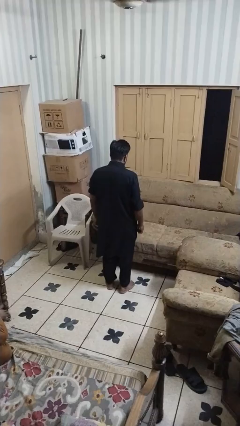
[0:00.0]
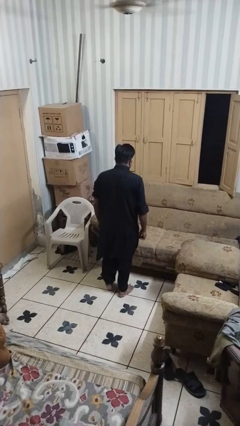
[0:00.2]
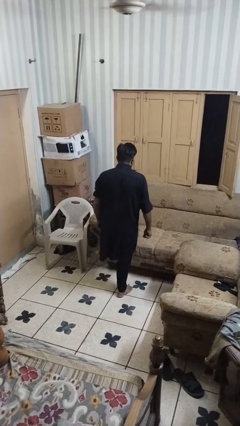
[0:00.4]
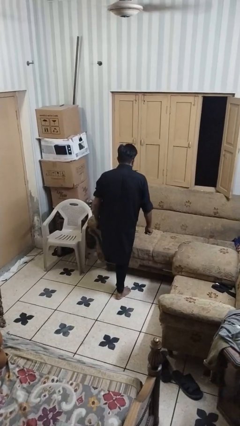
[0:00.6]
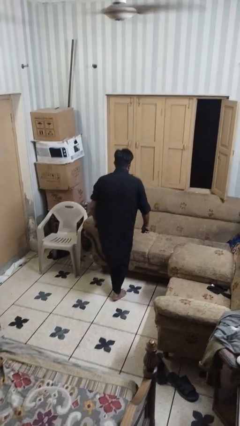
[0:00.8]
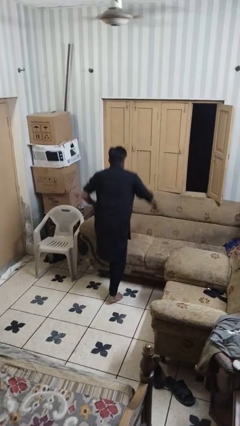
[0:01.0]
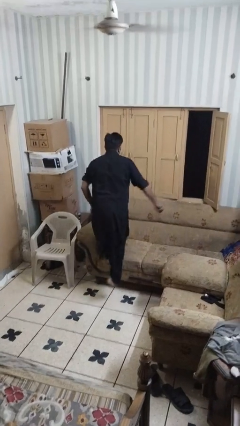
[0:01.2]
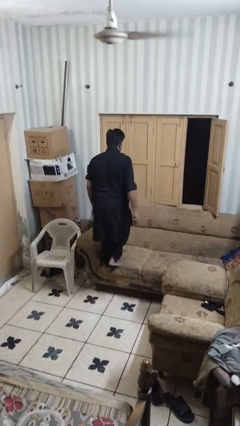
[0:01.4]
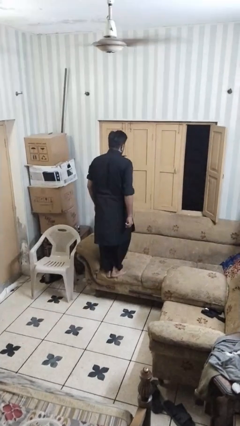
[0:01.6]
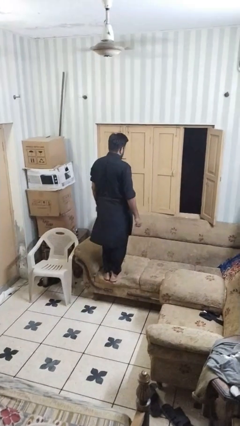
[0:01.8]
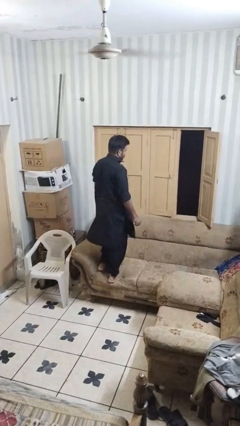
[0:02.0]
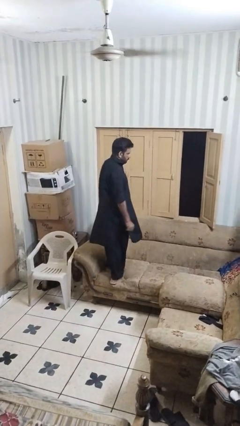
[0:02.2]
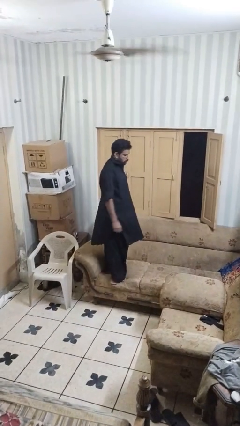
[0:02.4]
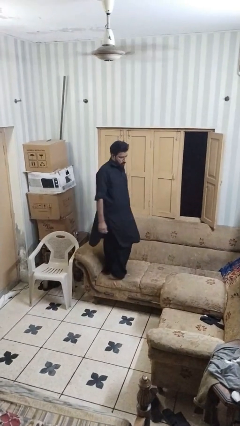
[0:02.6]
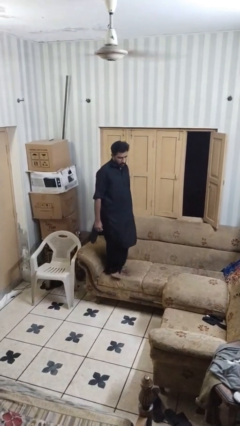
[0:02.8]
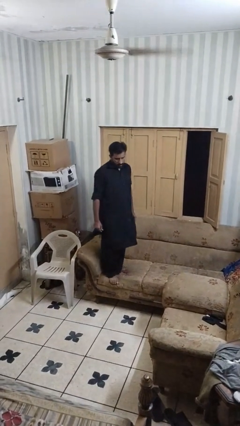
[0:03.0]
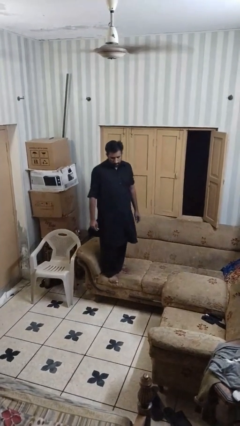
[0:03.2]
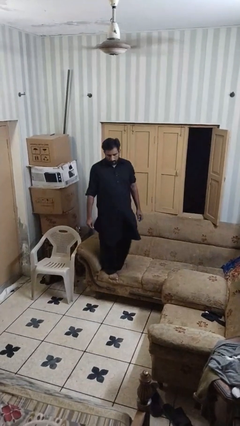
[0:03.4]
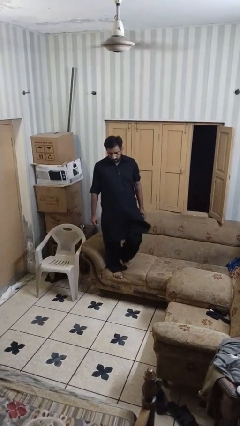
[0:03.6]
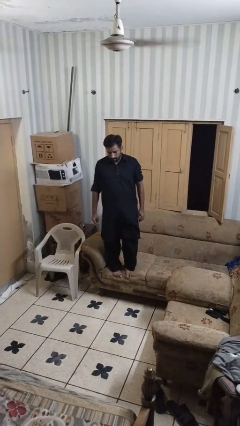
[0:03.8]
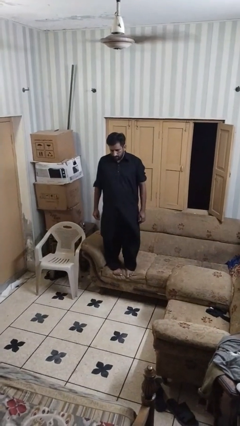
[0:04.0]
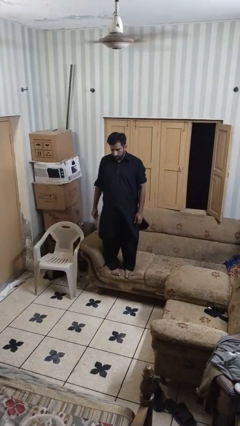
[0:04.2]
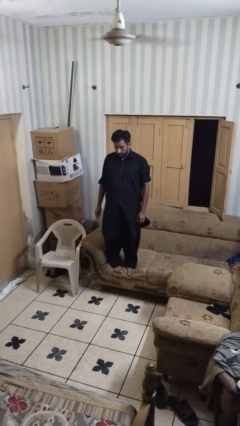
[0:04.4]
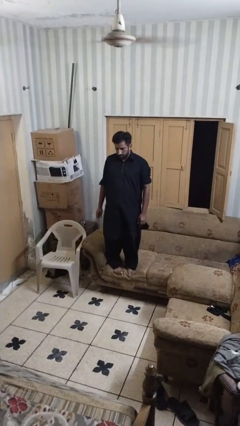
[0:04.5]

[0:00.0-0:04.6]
person climbs on couch

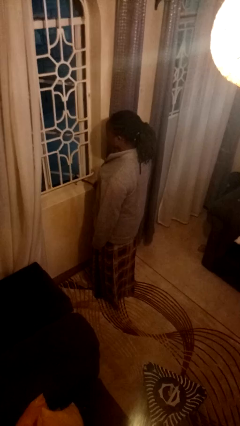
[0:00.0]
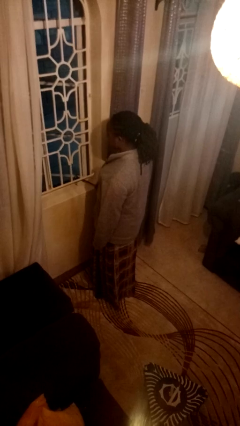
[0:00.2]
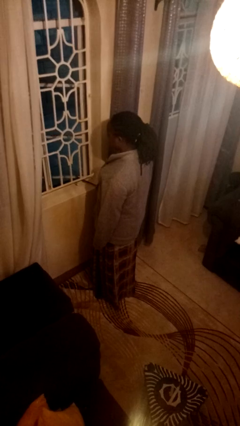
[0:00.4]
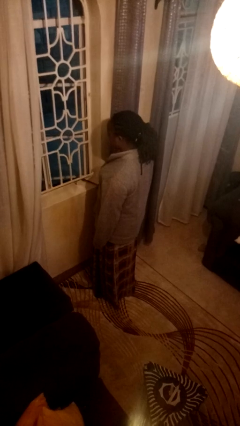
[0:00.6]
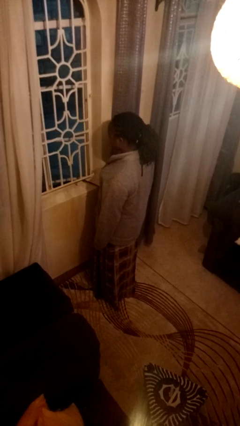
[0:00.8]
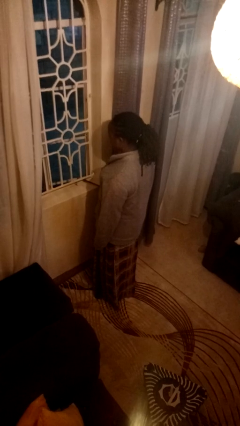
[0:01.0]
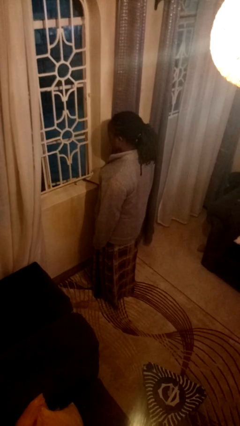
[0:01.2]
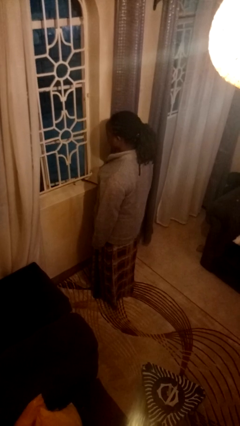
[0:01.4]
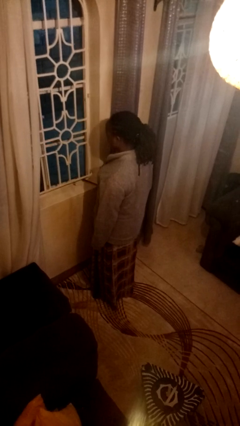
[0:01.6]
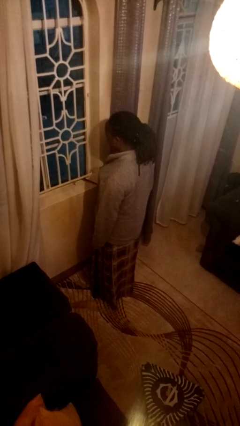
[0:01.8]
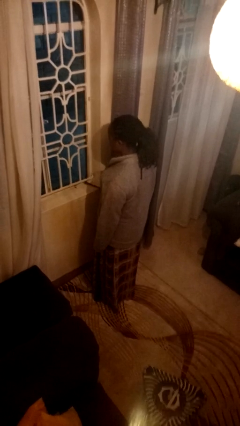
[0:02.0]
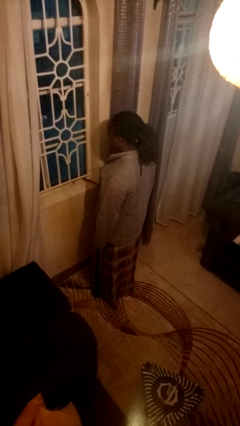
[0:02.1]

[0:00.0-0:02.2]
person closes home window

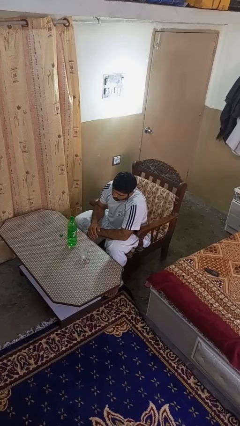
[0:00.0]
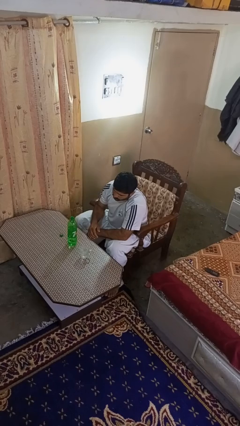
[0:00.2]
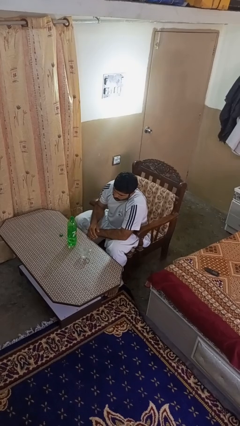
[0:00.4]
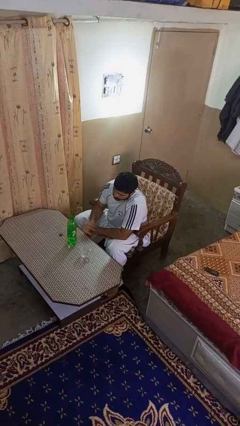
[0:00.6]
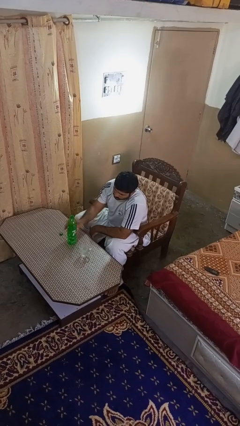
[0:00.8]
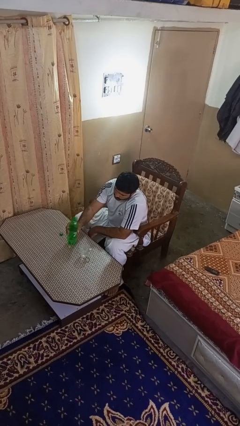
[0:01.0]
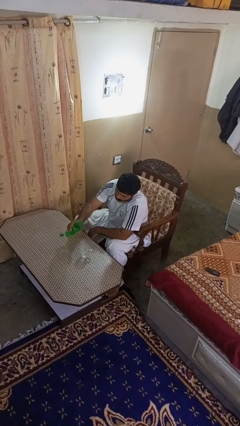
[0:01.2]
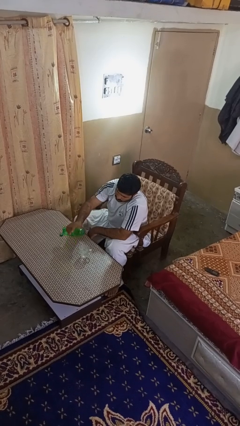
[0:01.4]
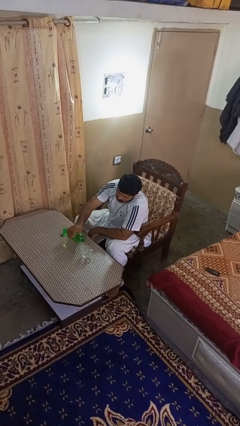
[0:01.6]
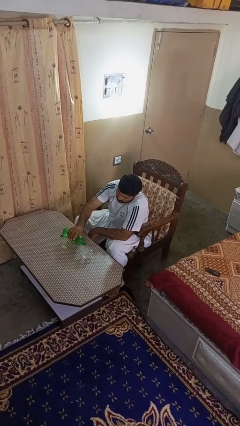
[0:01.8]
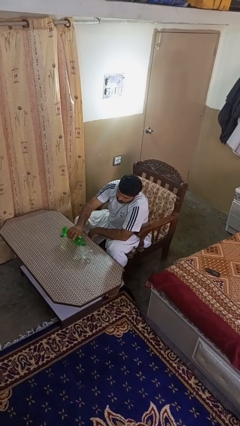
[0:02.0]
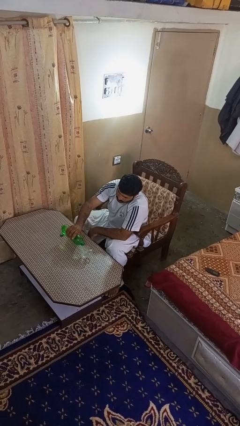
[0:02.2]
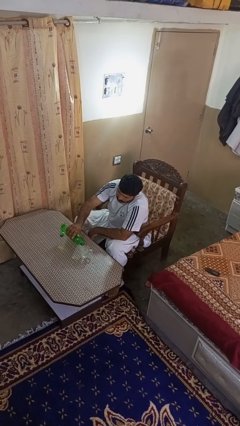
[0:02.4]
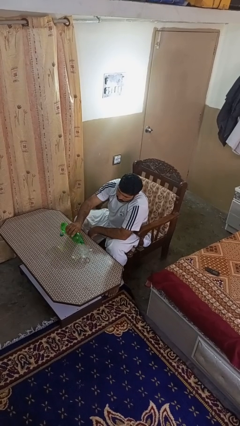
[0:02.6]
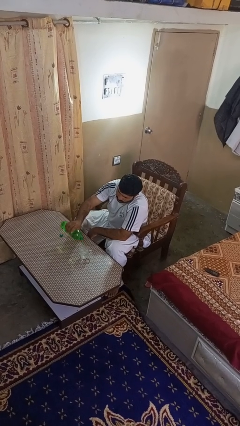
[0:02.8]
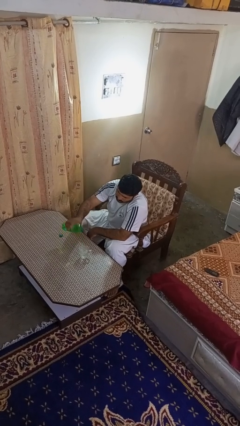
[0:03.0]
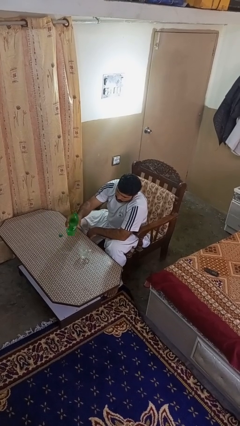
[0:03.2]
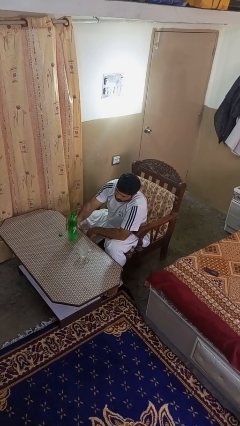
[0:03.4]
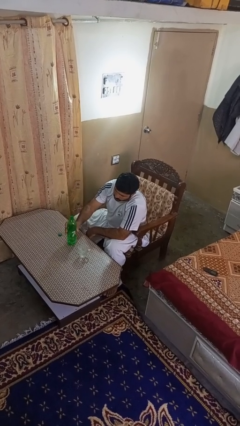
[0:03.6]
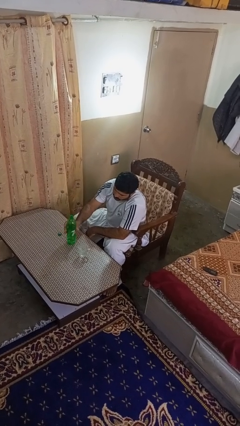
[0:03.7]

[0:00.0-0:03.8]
person pours liquid into cup

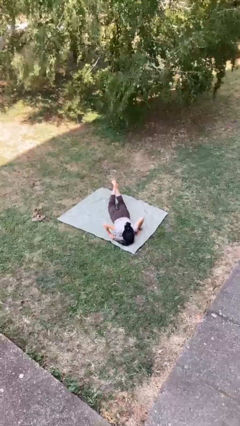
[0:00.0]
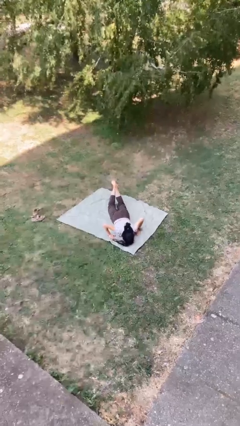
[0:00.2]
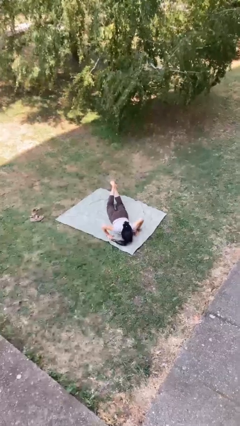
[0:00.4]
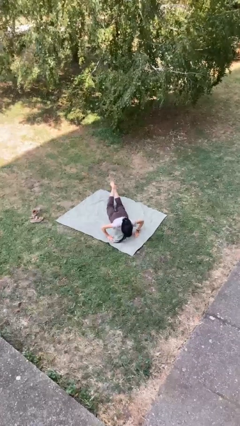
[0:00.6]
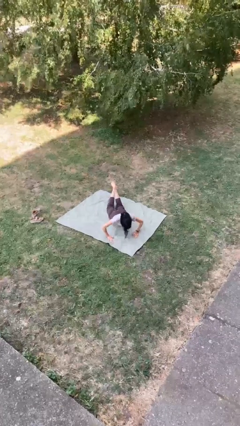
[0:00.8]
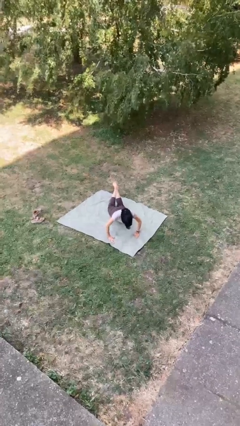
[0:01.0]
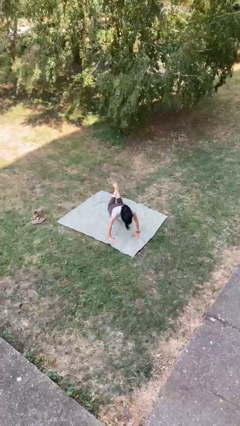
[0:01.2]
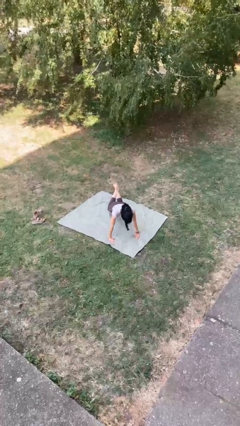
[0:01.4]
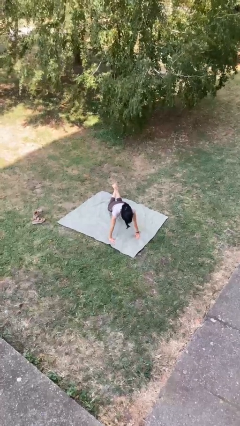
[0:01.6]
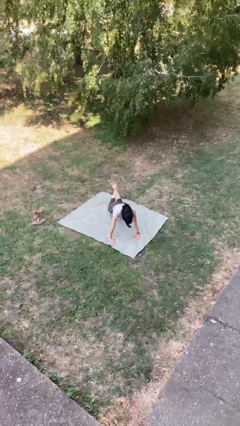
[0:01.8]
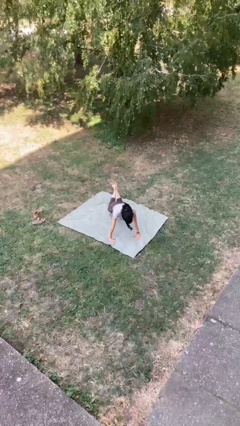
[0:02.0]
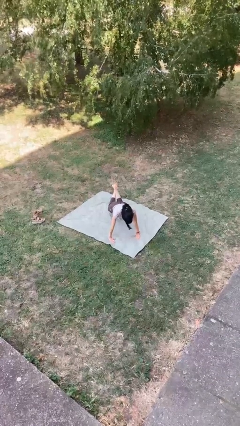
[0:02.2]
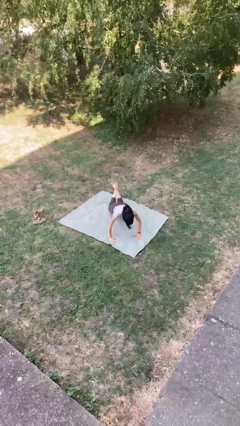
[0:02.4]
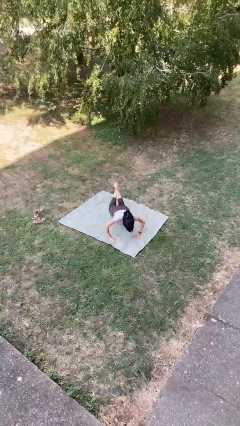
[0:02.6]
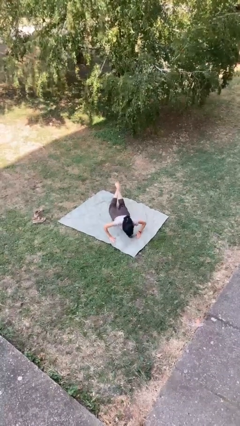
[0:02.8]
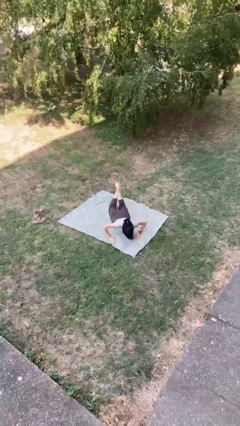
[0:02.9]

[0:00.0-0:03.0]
person exercises with pushup

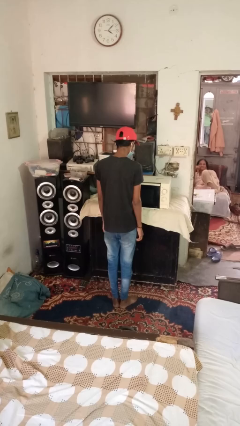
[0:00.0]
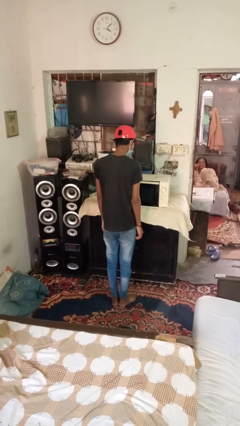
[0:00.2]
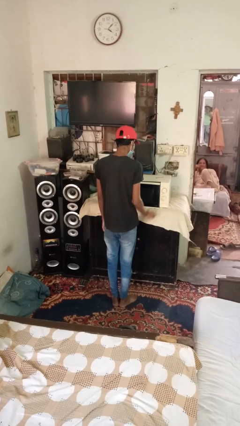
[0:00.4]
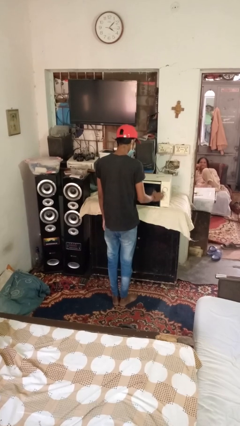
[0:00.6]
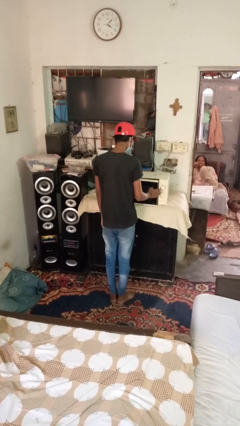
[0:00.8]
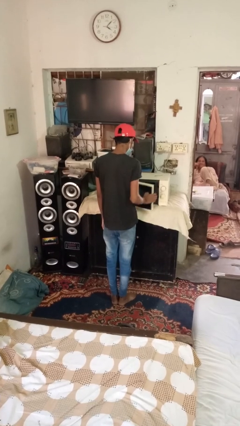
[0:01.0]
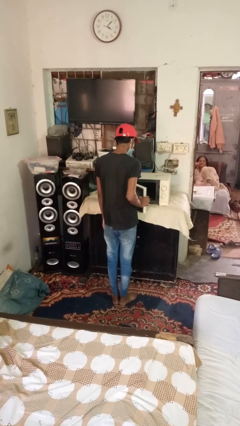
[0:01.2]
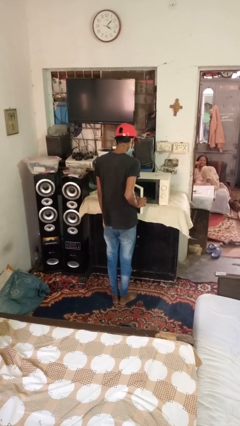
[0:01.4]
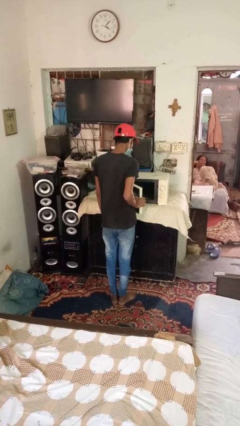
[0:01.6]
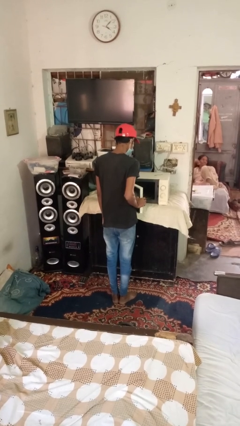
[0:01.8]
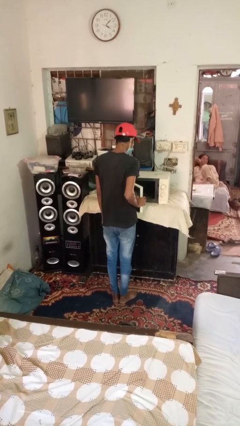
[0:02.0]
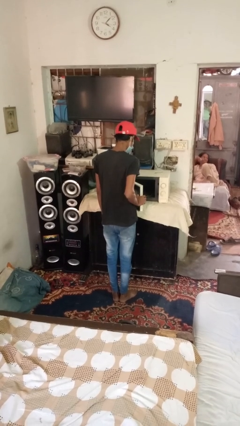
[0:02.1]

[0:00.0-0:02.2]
person opens dishwasher

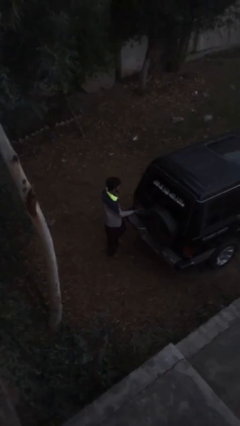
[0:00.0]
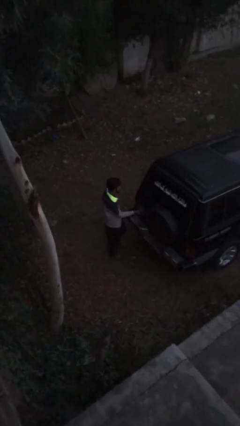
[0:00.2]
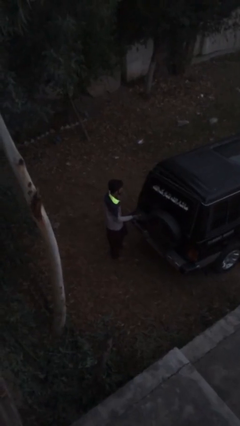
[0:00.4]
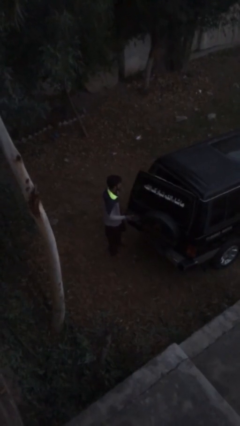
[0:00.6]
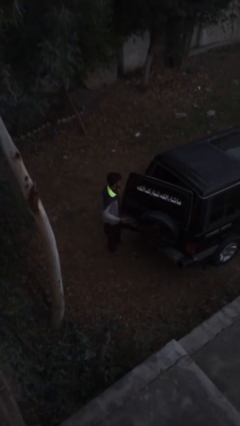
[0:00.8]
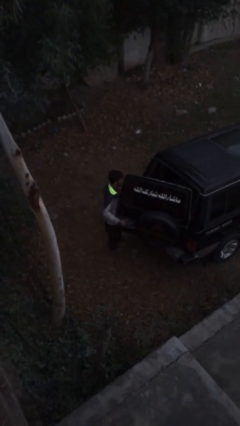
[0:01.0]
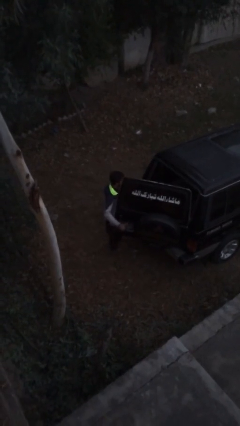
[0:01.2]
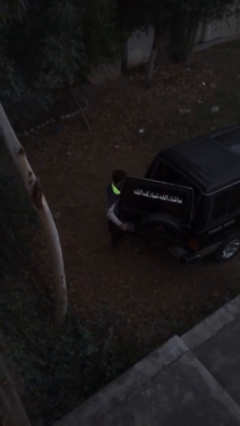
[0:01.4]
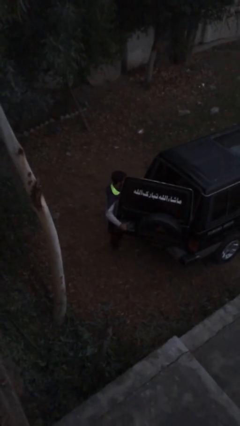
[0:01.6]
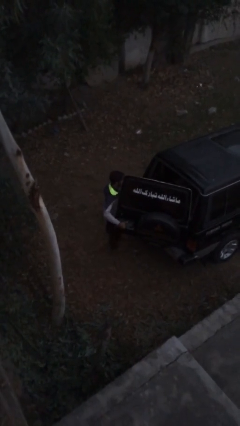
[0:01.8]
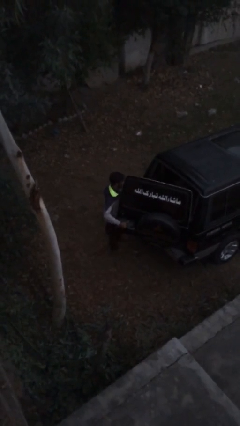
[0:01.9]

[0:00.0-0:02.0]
person opens car trunk
